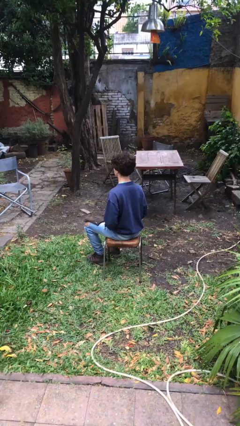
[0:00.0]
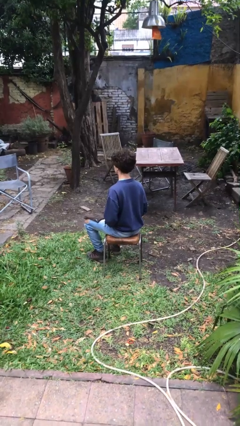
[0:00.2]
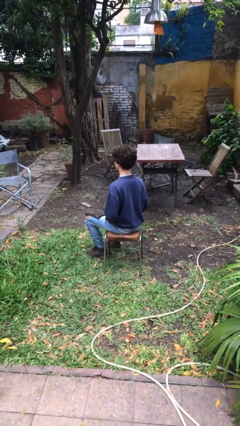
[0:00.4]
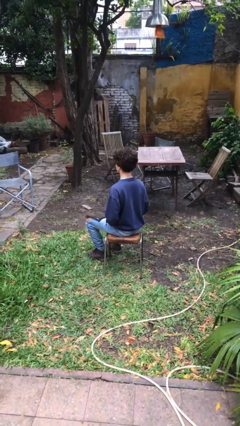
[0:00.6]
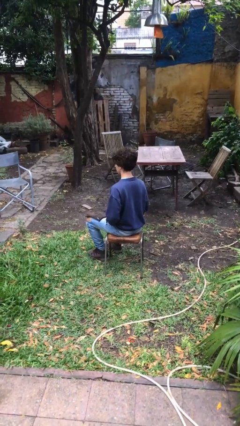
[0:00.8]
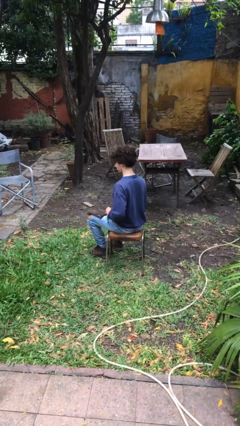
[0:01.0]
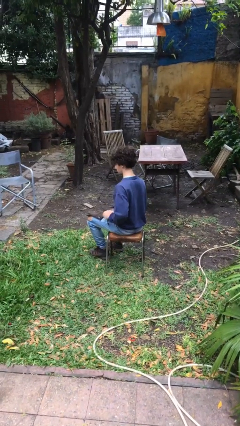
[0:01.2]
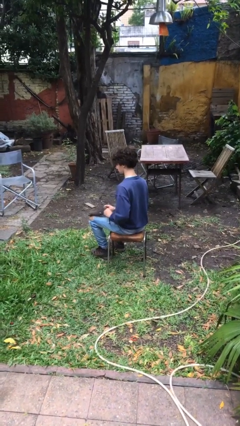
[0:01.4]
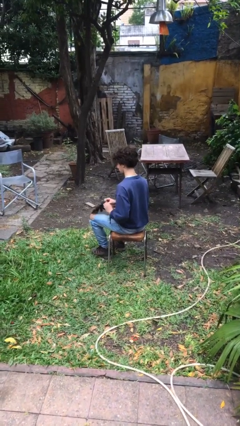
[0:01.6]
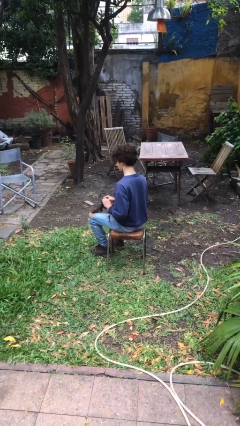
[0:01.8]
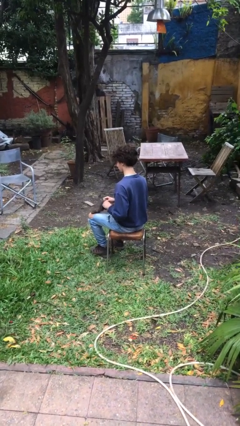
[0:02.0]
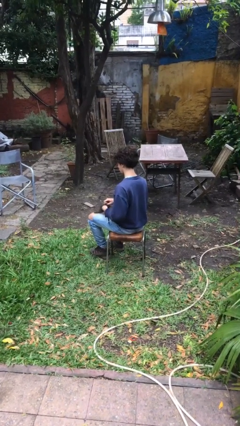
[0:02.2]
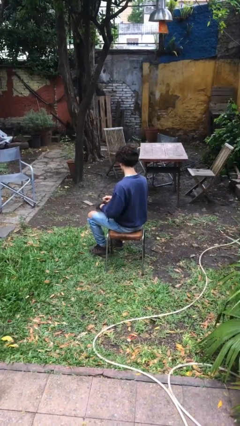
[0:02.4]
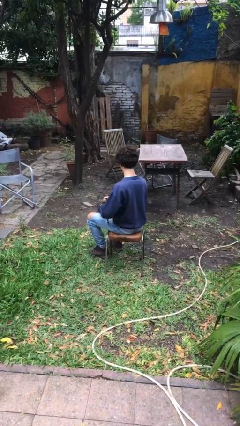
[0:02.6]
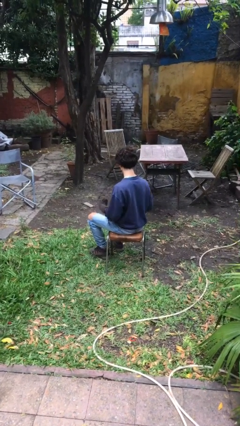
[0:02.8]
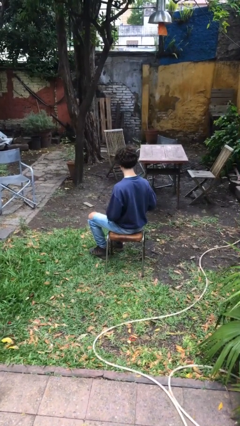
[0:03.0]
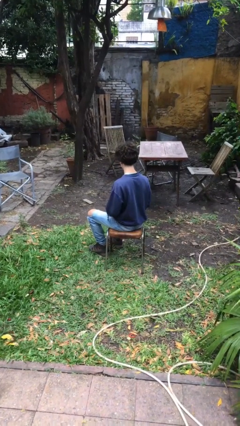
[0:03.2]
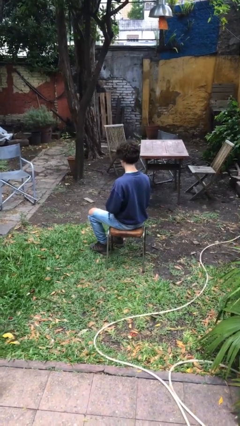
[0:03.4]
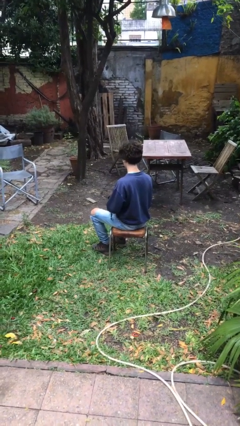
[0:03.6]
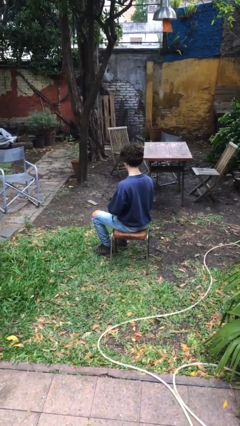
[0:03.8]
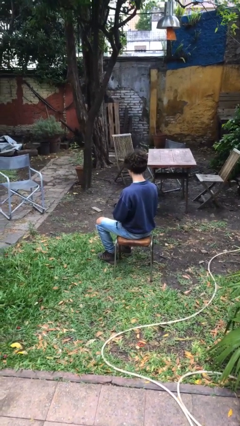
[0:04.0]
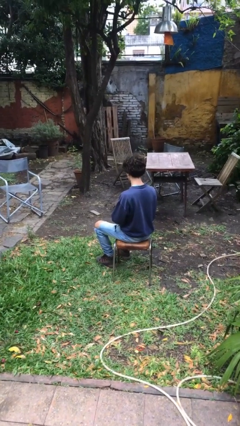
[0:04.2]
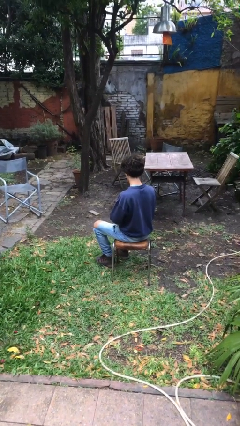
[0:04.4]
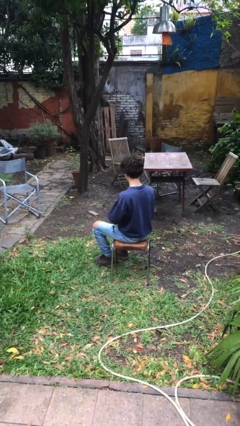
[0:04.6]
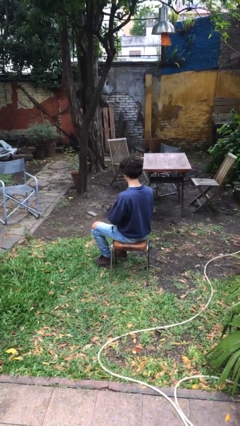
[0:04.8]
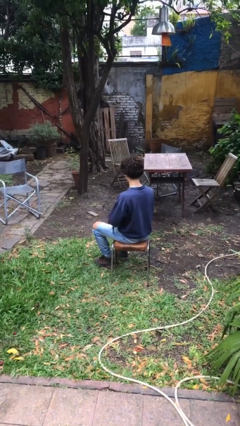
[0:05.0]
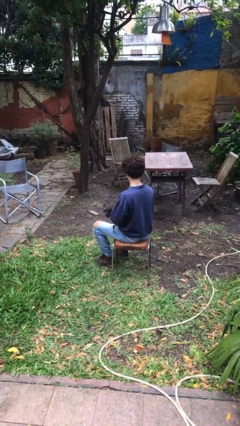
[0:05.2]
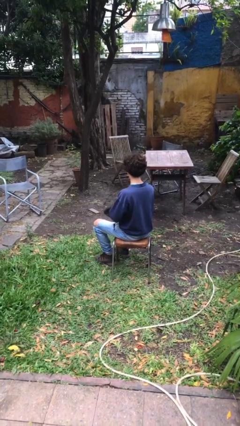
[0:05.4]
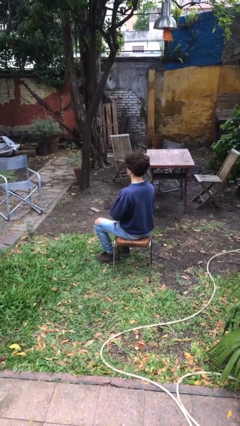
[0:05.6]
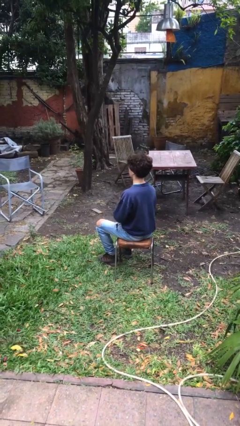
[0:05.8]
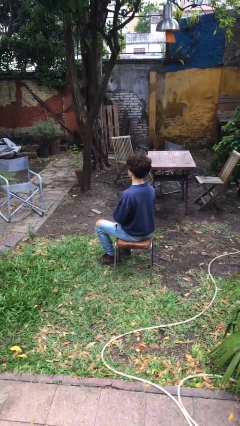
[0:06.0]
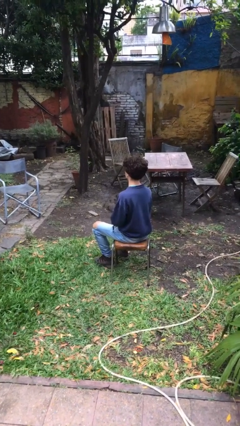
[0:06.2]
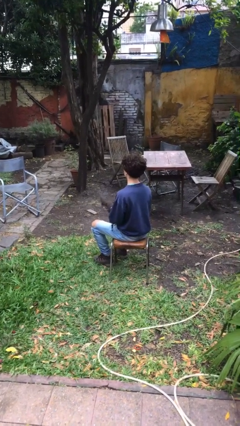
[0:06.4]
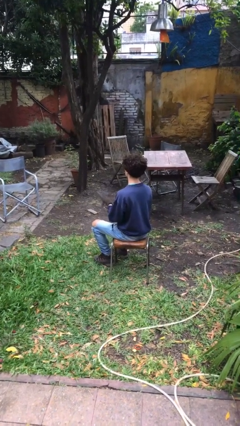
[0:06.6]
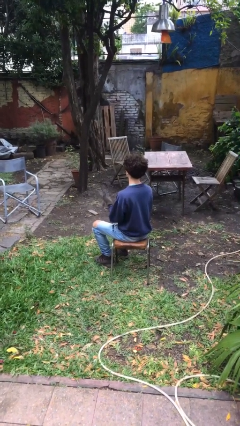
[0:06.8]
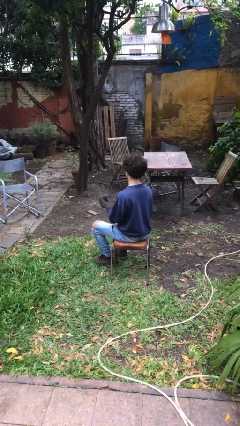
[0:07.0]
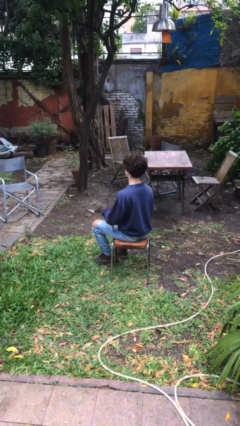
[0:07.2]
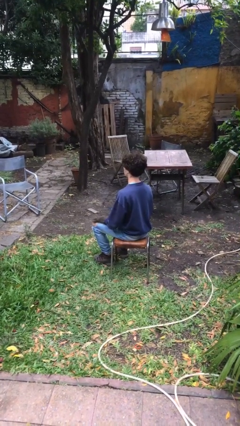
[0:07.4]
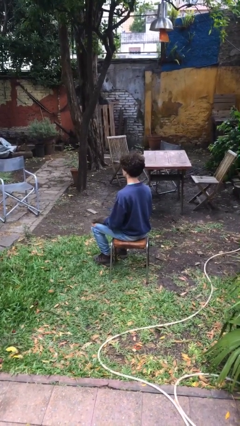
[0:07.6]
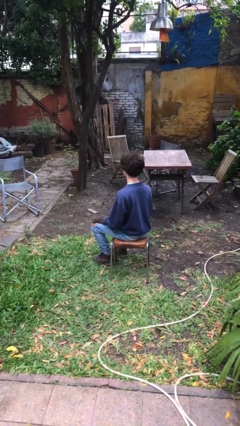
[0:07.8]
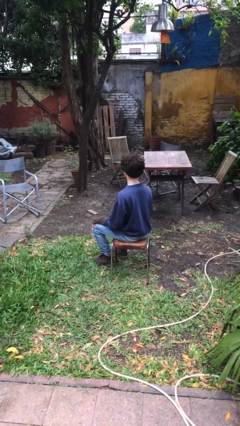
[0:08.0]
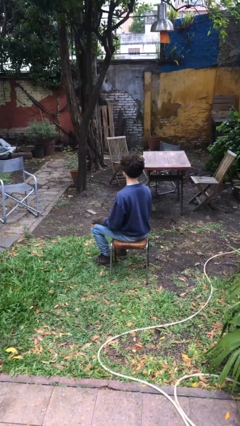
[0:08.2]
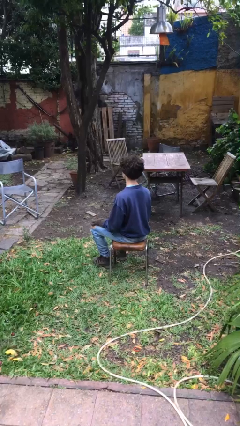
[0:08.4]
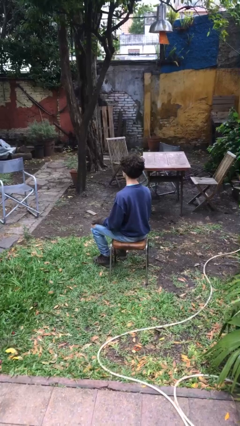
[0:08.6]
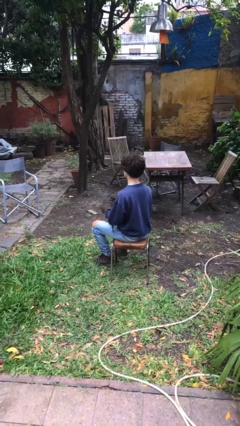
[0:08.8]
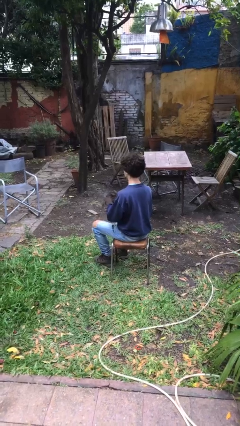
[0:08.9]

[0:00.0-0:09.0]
person puts on gloves

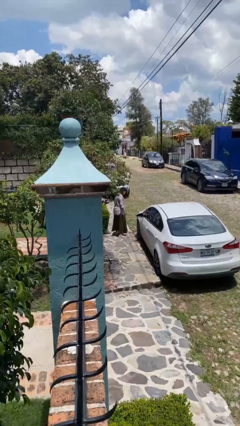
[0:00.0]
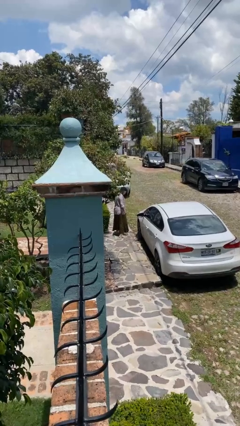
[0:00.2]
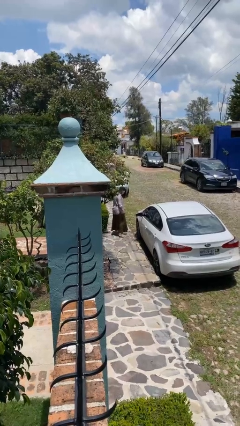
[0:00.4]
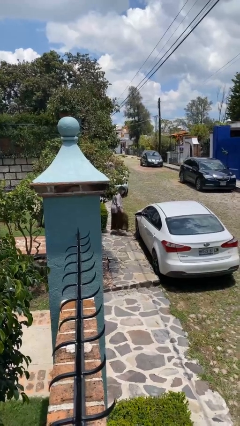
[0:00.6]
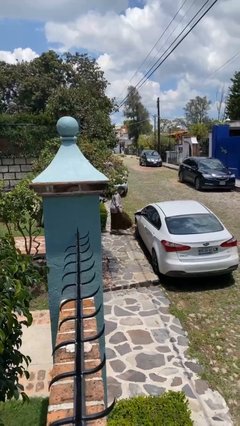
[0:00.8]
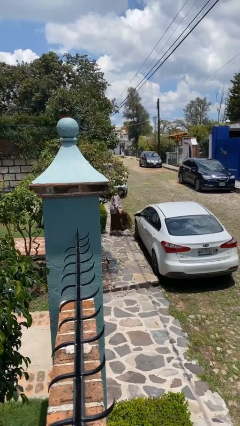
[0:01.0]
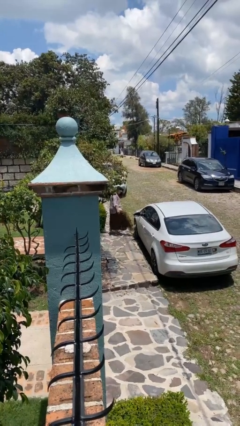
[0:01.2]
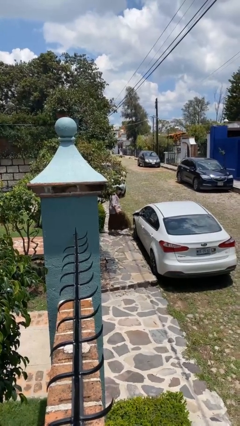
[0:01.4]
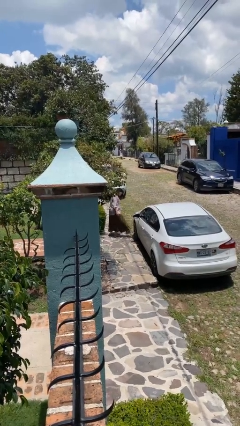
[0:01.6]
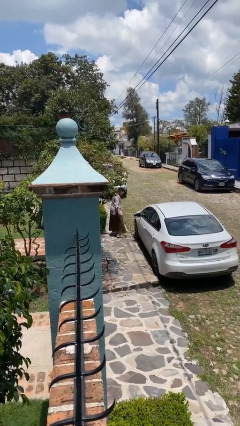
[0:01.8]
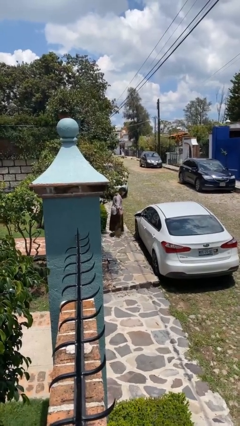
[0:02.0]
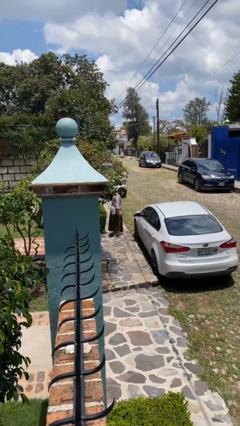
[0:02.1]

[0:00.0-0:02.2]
person kicks car tires

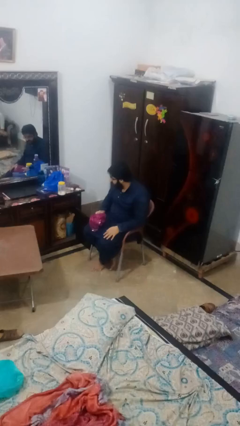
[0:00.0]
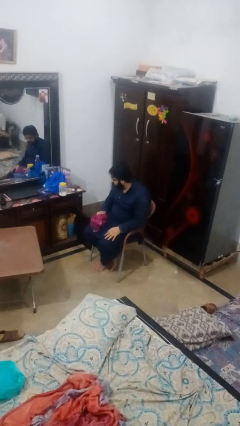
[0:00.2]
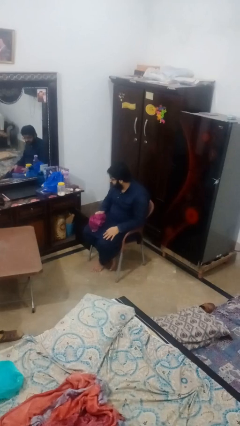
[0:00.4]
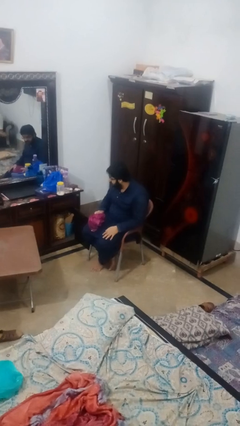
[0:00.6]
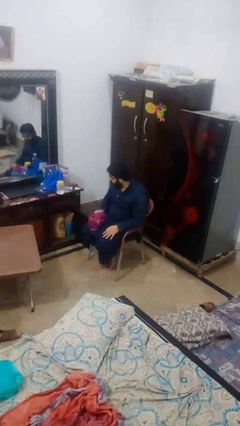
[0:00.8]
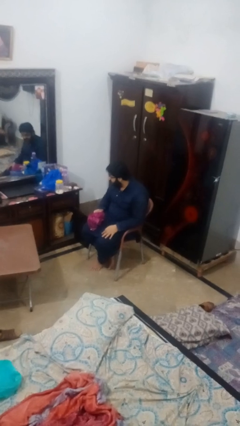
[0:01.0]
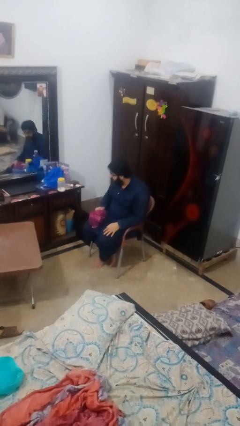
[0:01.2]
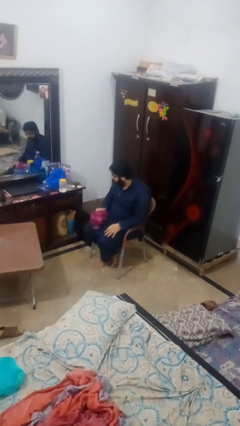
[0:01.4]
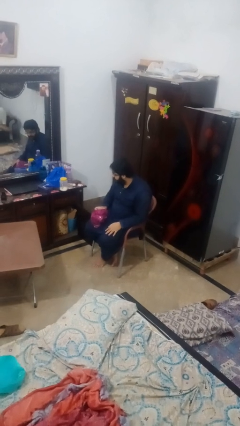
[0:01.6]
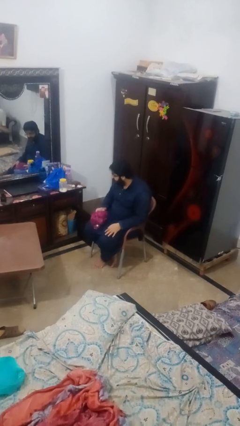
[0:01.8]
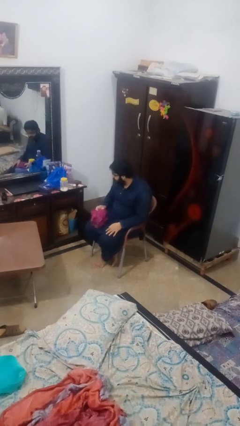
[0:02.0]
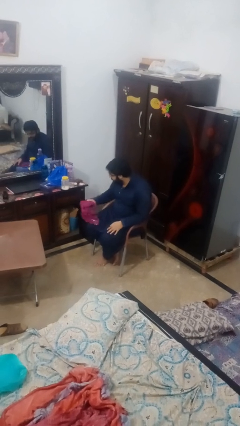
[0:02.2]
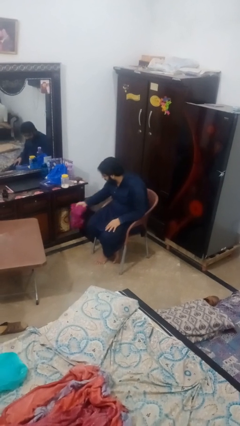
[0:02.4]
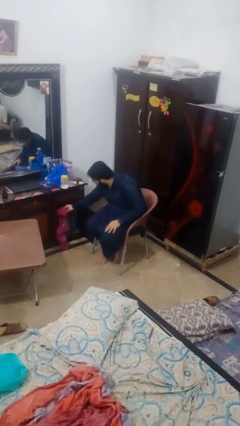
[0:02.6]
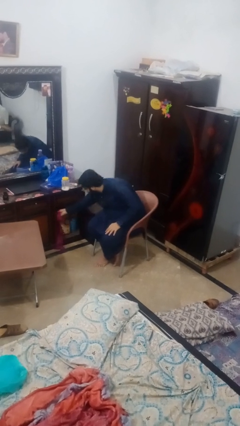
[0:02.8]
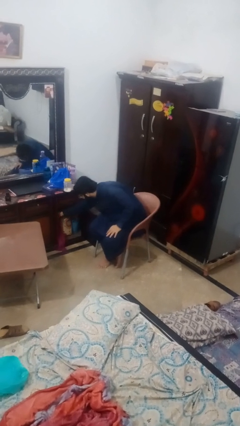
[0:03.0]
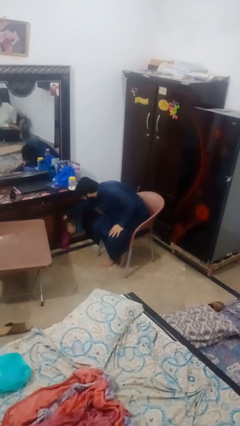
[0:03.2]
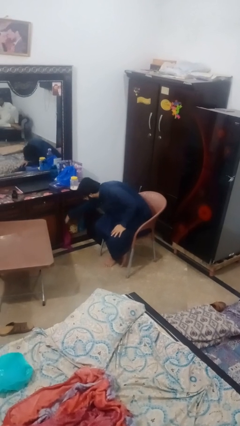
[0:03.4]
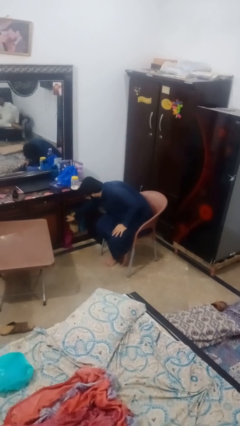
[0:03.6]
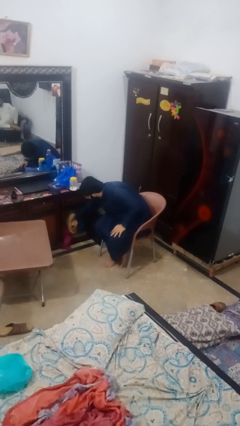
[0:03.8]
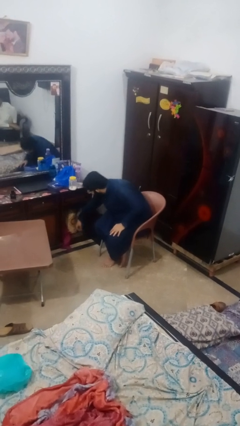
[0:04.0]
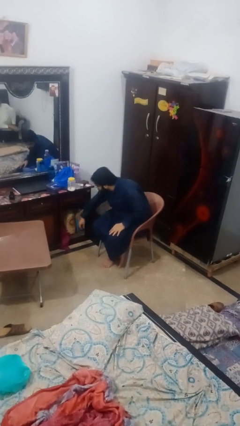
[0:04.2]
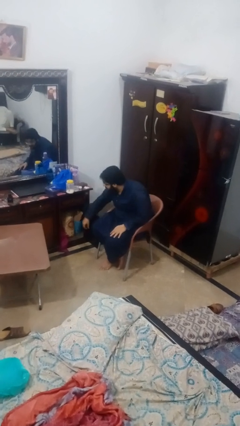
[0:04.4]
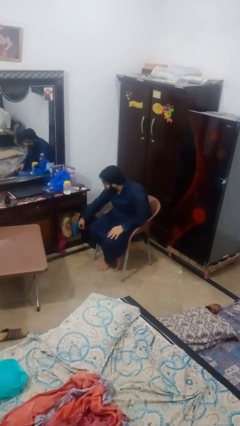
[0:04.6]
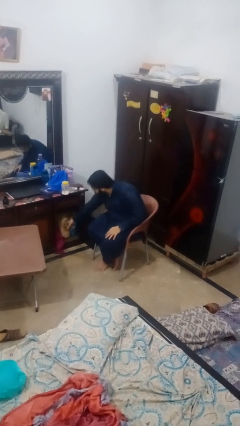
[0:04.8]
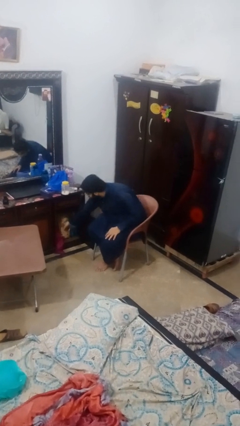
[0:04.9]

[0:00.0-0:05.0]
person puts clothes into dresser

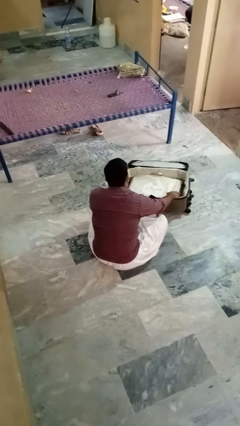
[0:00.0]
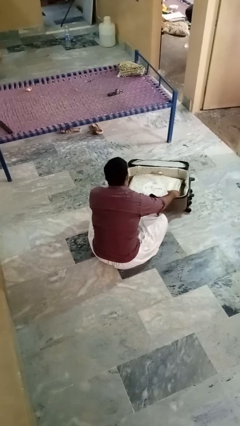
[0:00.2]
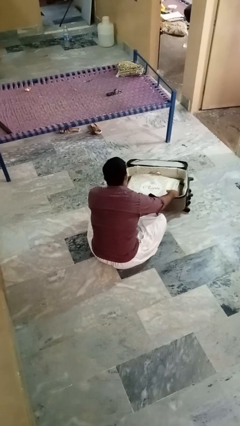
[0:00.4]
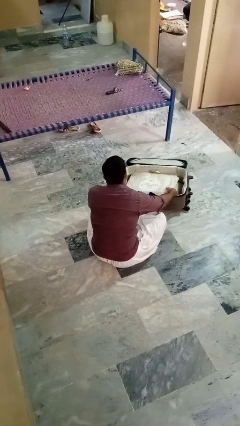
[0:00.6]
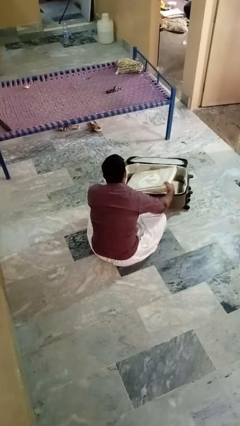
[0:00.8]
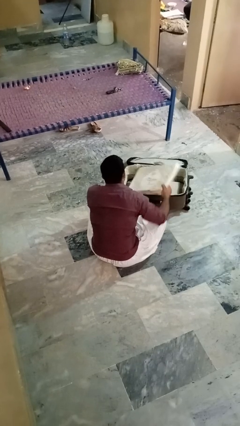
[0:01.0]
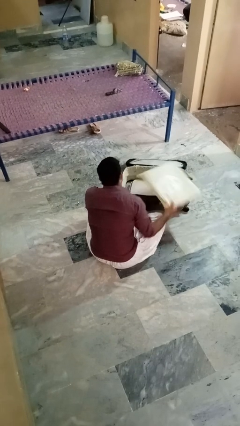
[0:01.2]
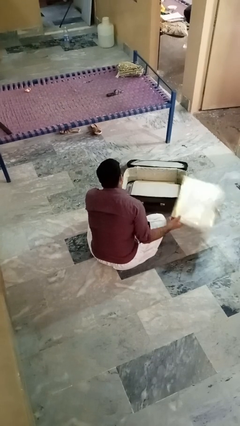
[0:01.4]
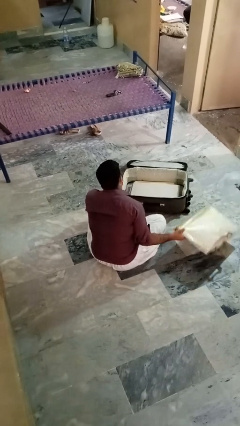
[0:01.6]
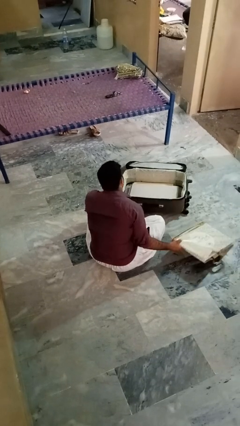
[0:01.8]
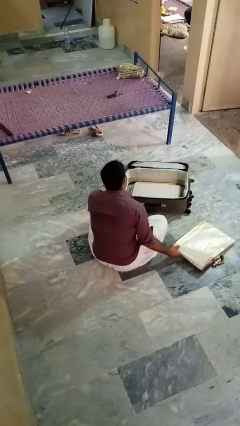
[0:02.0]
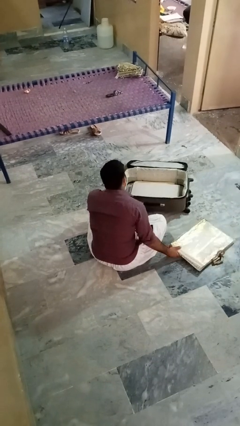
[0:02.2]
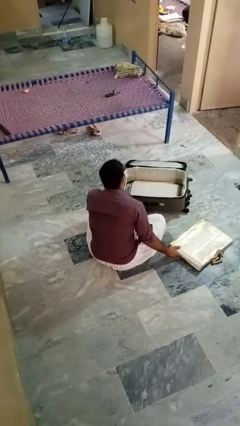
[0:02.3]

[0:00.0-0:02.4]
person takes object from bag
